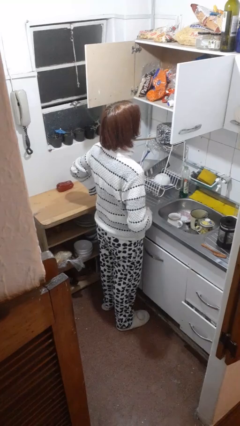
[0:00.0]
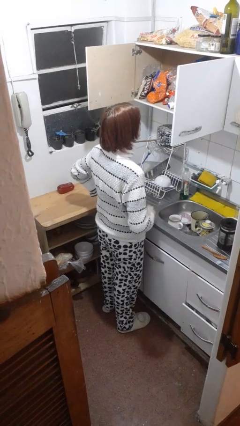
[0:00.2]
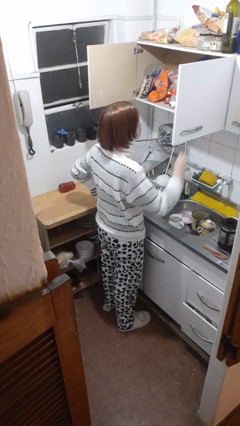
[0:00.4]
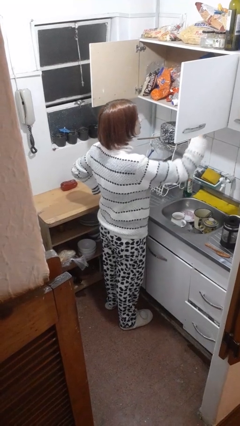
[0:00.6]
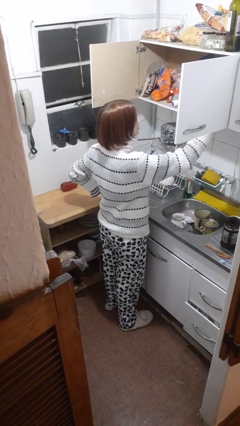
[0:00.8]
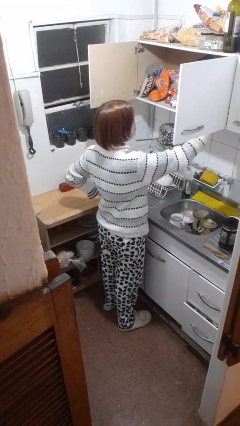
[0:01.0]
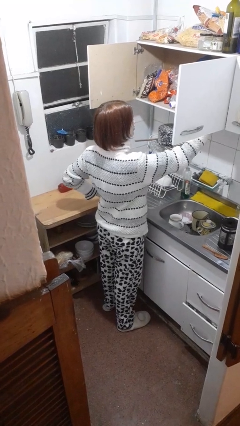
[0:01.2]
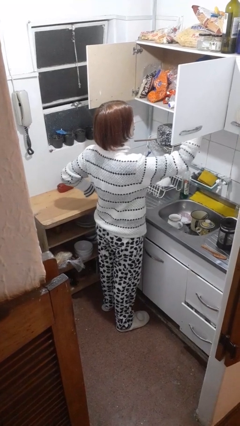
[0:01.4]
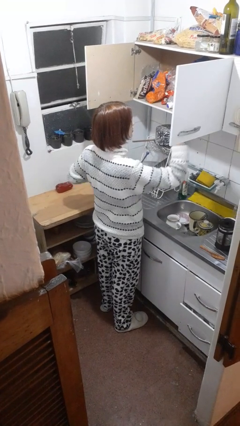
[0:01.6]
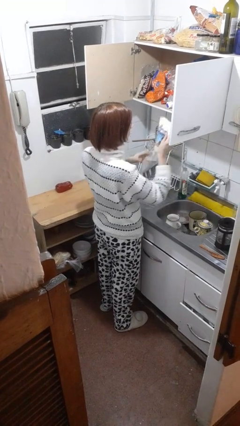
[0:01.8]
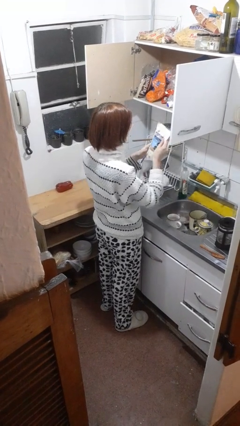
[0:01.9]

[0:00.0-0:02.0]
person takes object from cabinet

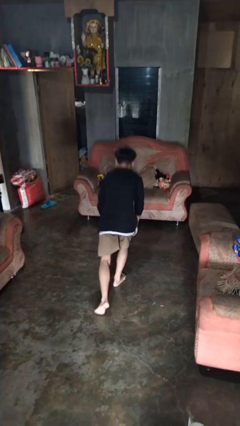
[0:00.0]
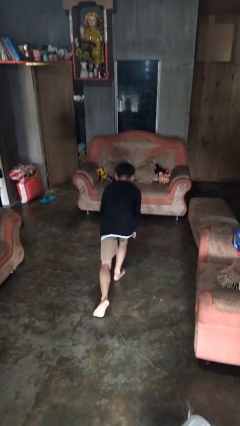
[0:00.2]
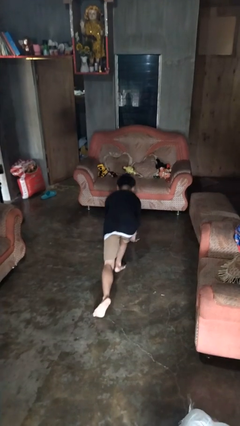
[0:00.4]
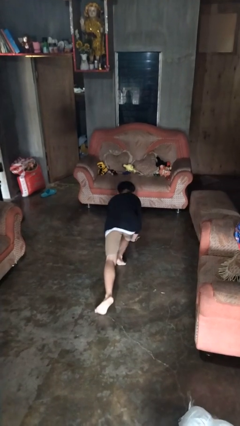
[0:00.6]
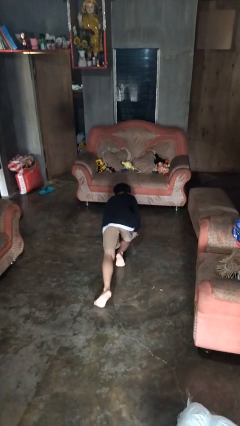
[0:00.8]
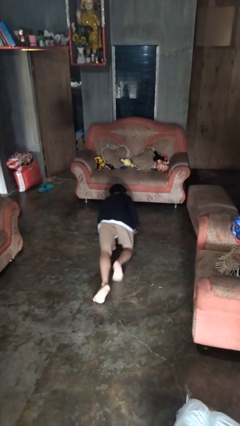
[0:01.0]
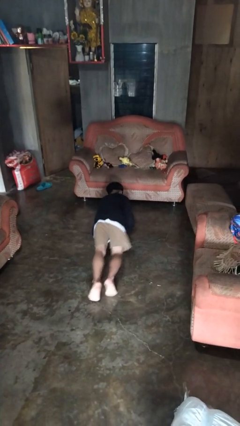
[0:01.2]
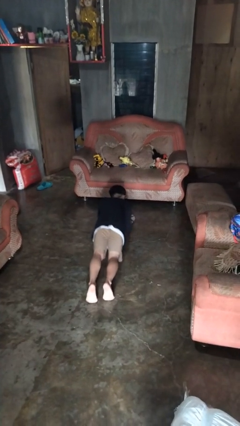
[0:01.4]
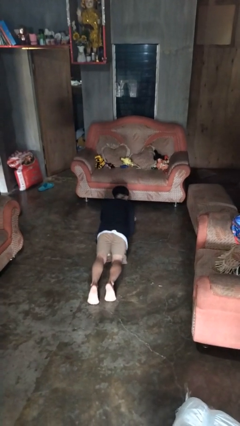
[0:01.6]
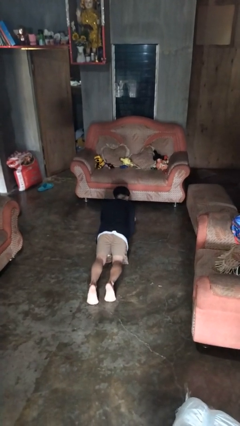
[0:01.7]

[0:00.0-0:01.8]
person exercises with plank

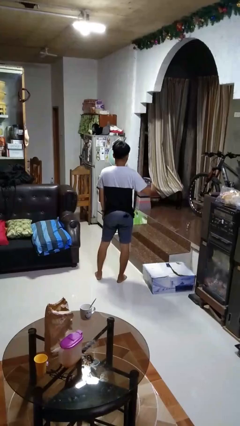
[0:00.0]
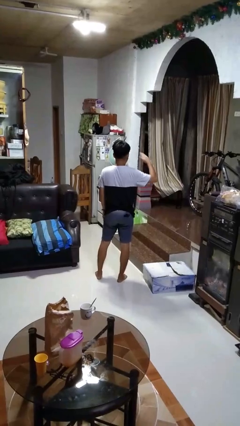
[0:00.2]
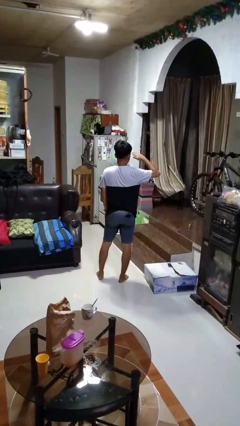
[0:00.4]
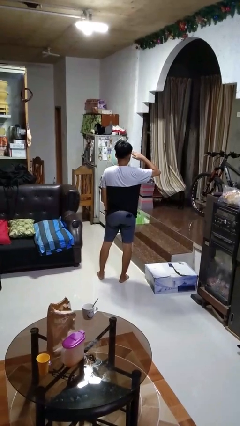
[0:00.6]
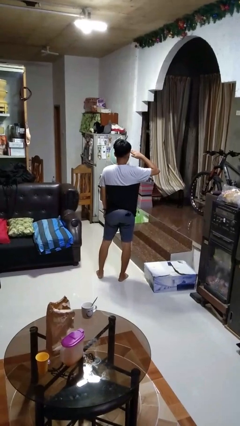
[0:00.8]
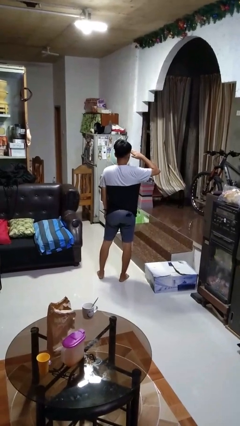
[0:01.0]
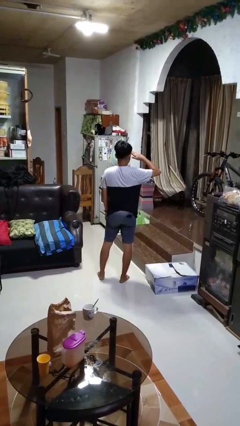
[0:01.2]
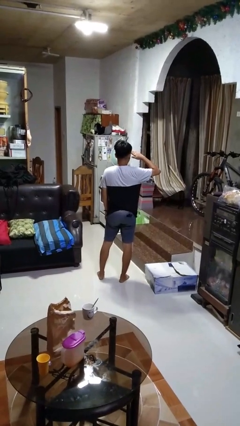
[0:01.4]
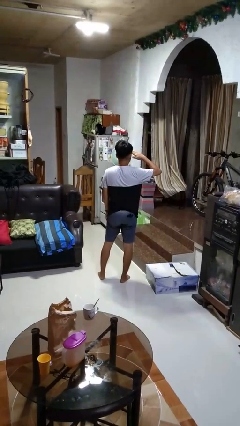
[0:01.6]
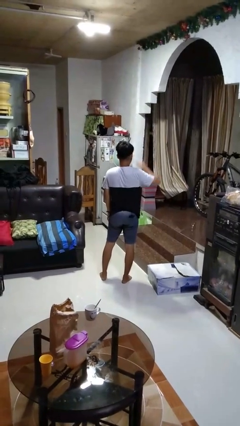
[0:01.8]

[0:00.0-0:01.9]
person salutes

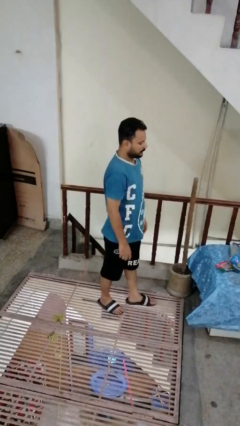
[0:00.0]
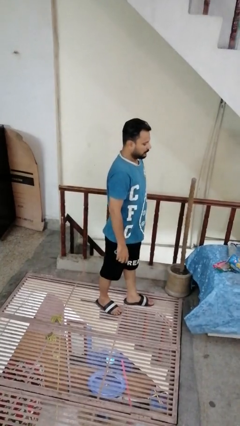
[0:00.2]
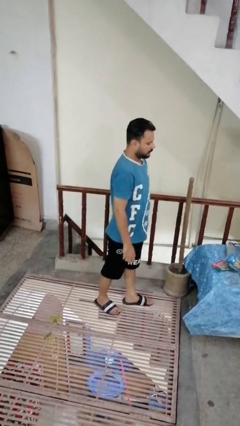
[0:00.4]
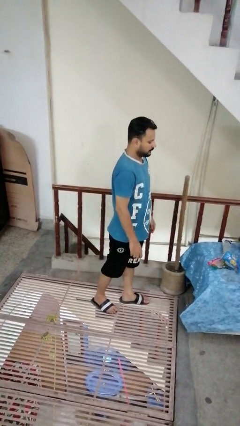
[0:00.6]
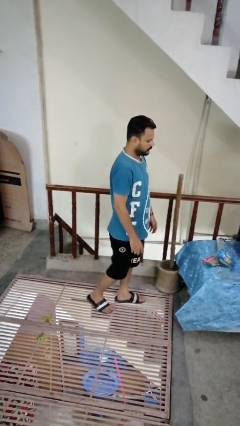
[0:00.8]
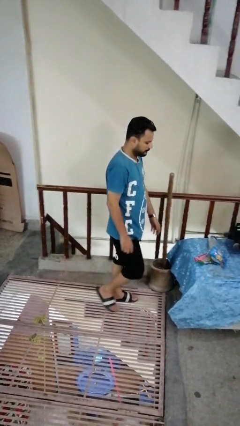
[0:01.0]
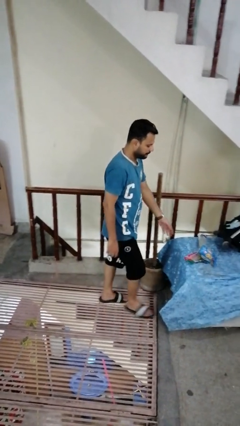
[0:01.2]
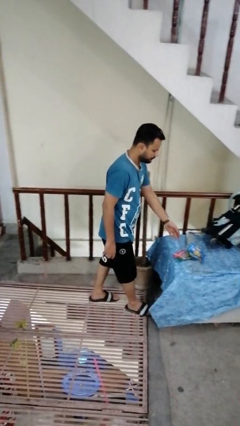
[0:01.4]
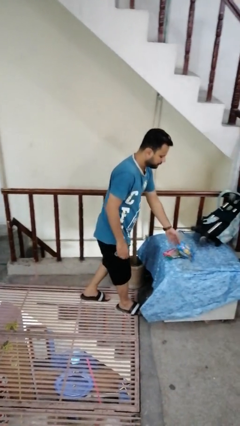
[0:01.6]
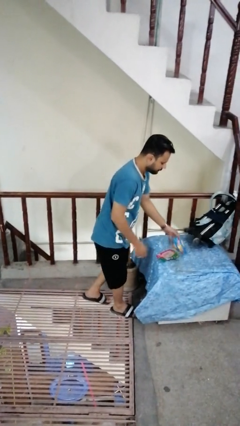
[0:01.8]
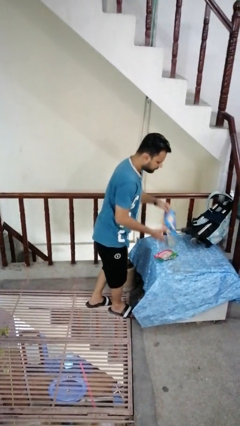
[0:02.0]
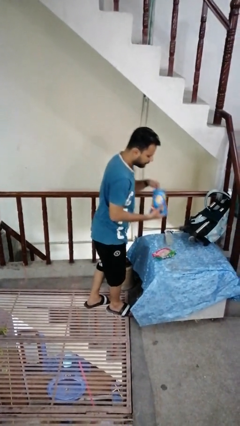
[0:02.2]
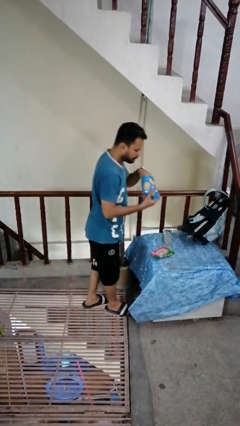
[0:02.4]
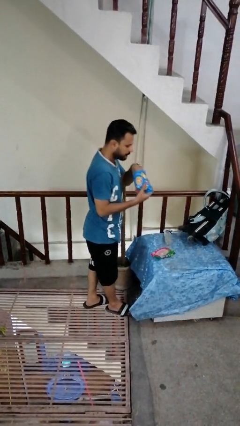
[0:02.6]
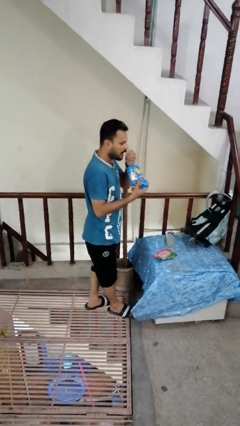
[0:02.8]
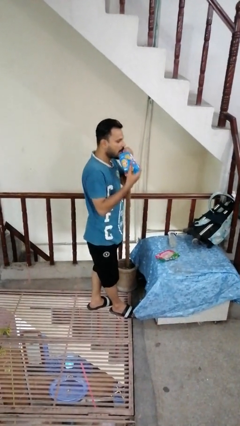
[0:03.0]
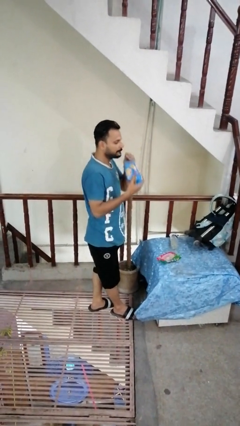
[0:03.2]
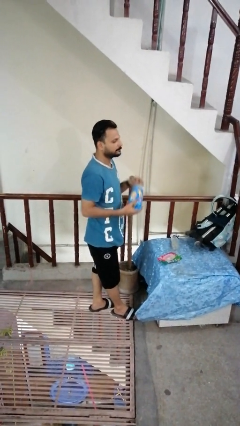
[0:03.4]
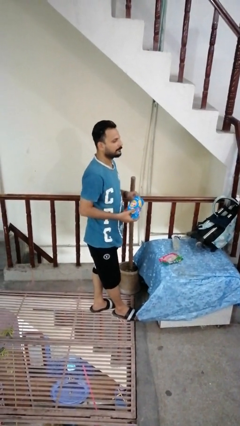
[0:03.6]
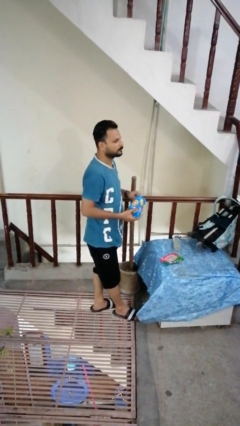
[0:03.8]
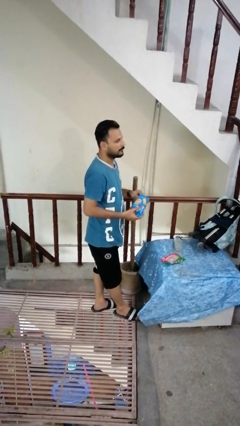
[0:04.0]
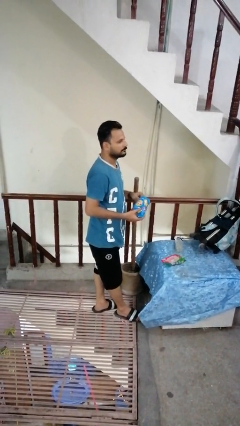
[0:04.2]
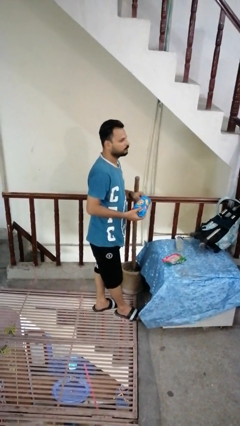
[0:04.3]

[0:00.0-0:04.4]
person eats snack from bag

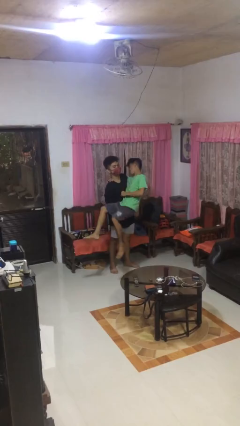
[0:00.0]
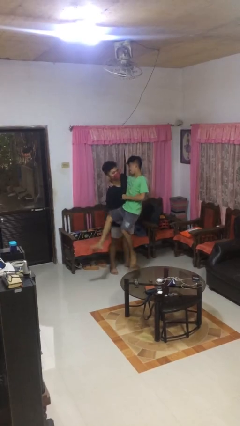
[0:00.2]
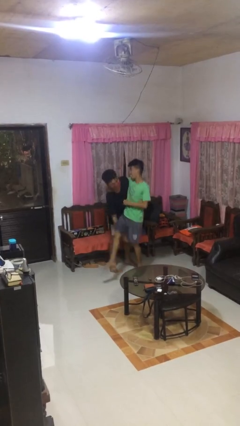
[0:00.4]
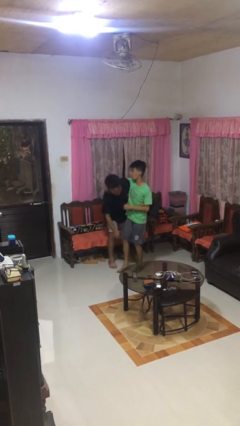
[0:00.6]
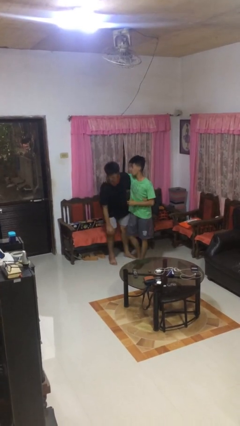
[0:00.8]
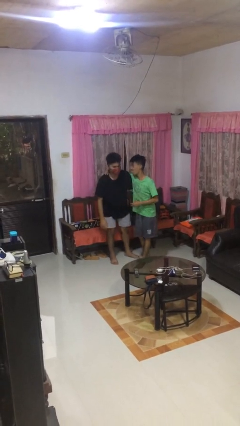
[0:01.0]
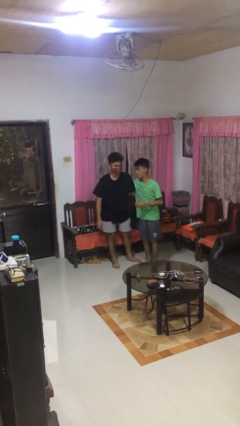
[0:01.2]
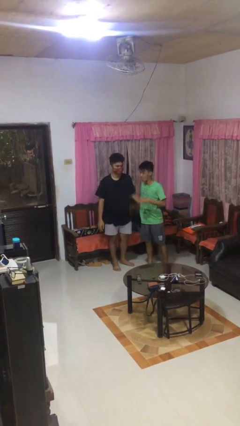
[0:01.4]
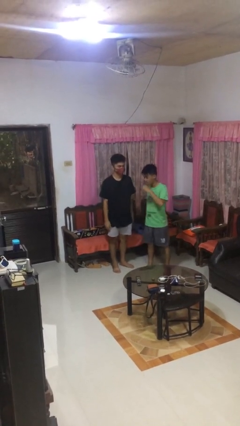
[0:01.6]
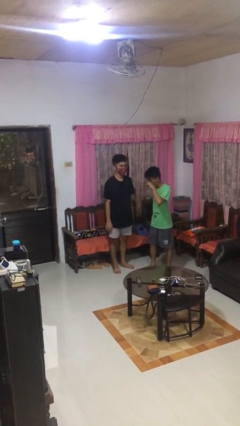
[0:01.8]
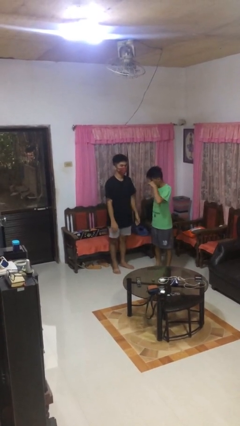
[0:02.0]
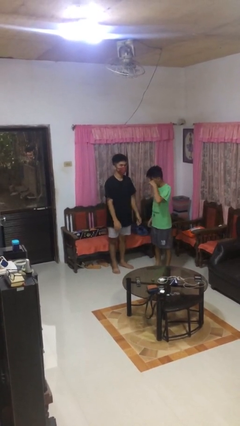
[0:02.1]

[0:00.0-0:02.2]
person puts down person

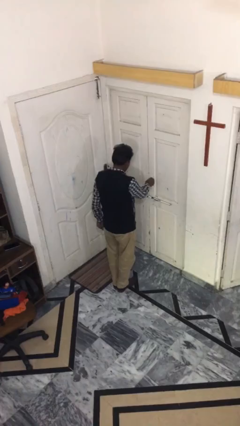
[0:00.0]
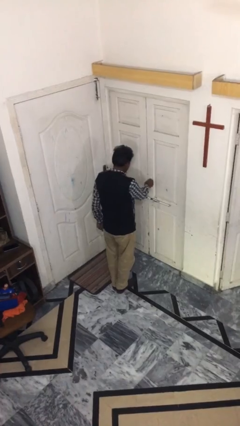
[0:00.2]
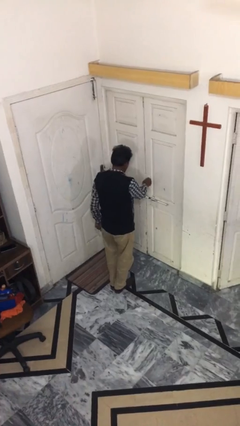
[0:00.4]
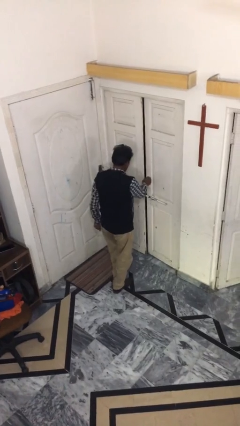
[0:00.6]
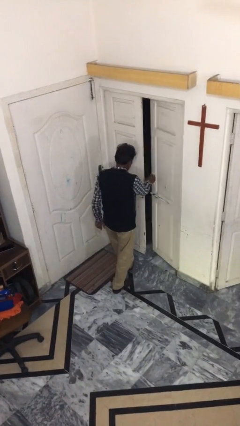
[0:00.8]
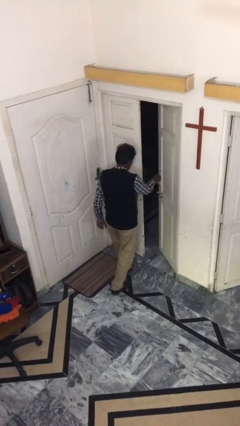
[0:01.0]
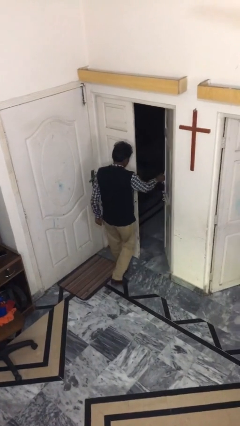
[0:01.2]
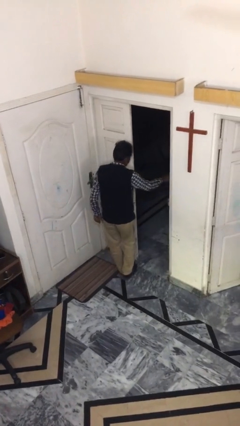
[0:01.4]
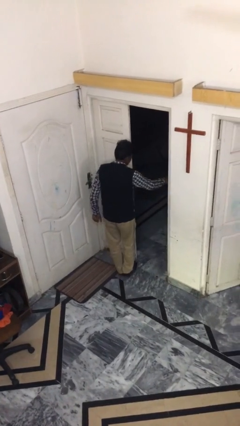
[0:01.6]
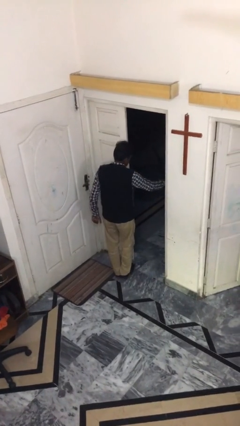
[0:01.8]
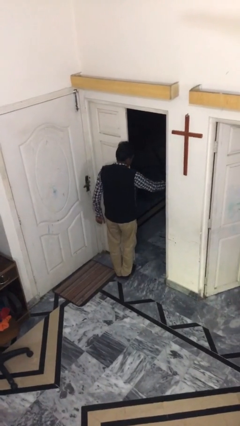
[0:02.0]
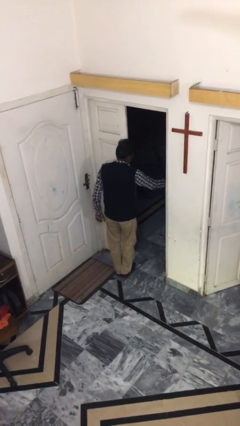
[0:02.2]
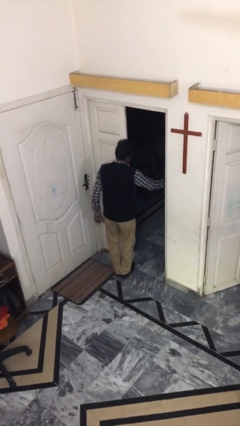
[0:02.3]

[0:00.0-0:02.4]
person opens facility door

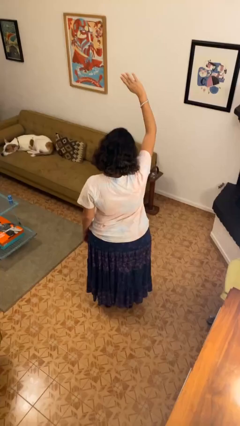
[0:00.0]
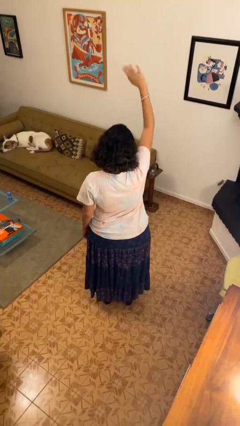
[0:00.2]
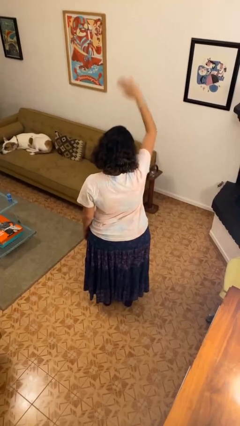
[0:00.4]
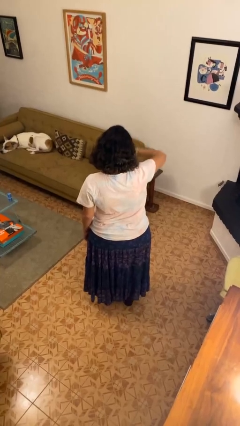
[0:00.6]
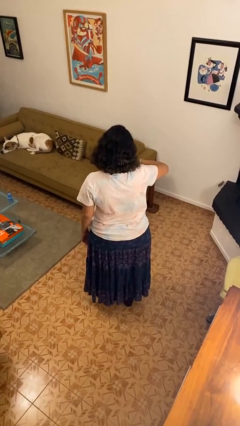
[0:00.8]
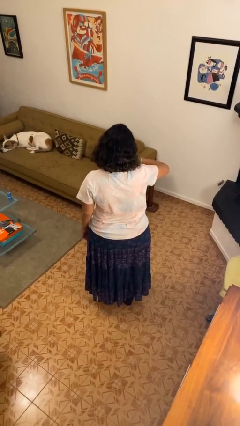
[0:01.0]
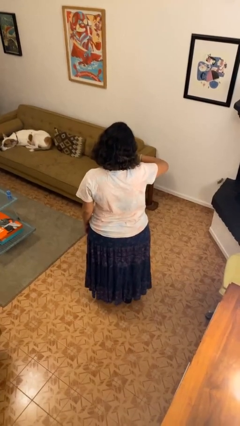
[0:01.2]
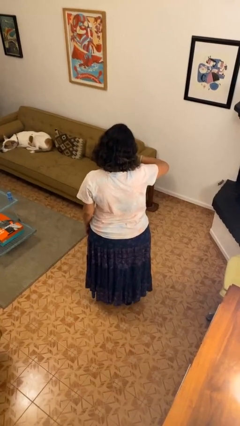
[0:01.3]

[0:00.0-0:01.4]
person gestures swipe down

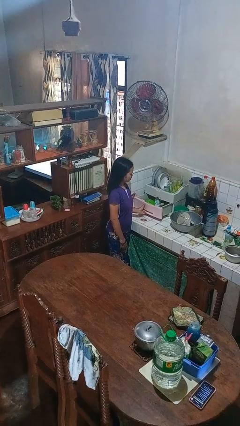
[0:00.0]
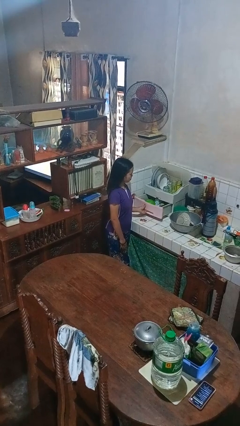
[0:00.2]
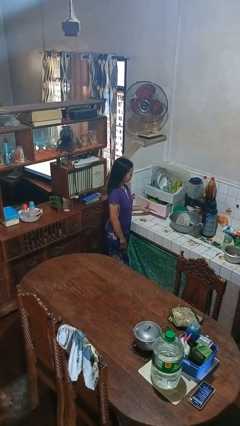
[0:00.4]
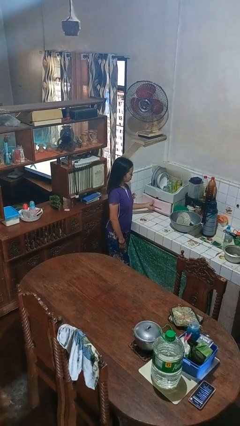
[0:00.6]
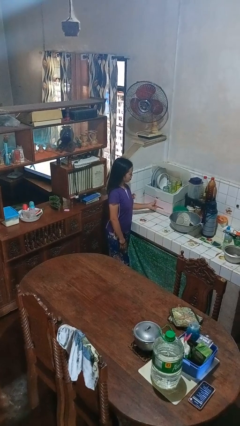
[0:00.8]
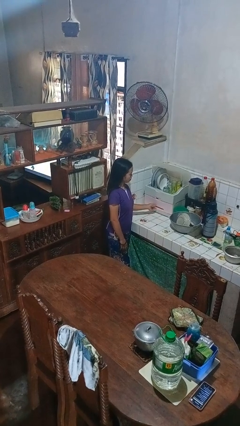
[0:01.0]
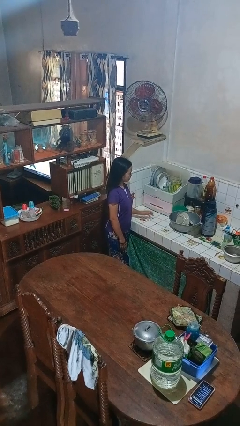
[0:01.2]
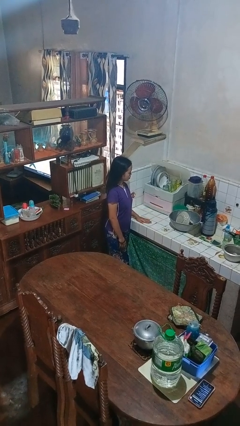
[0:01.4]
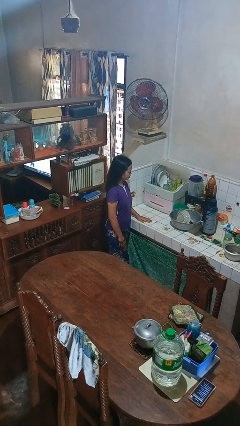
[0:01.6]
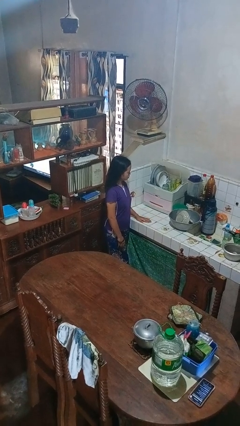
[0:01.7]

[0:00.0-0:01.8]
person closes kitchen drawer
